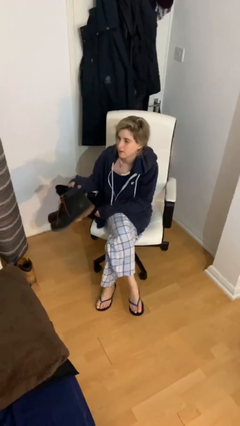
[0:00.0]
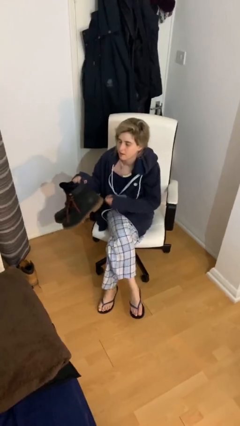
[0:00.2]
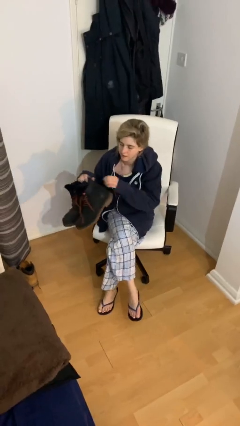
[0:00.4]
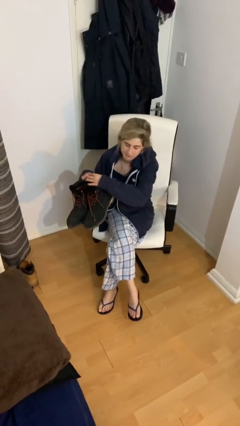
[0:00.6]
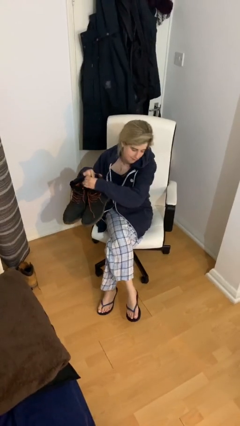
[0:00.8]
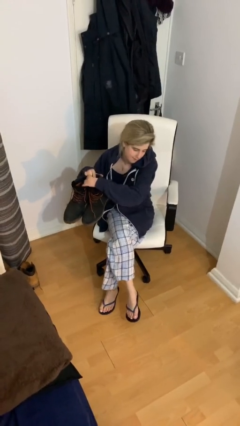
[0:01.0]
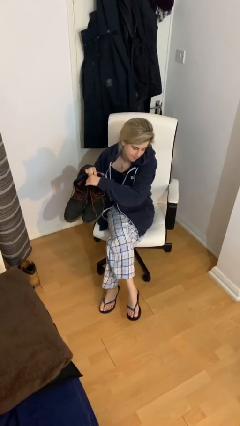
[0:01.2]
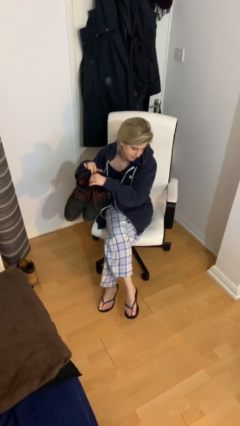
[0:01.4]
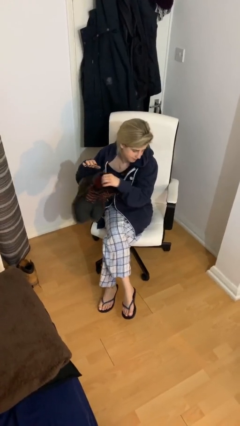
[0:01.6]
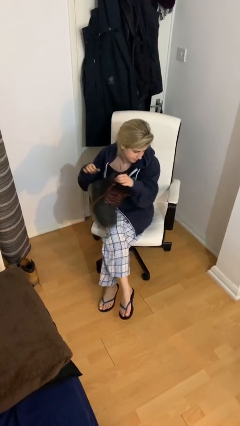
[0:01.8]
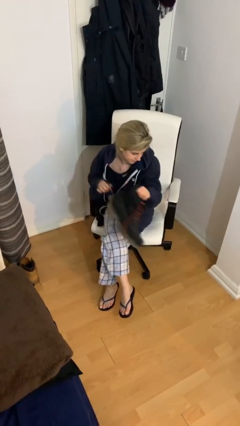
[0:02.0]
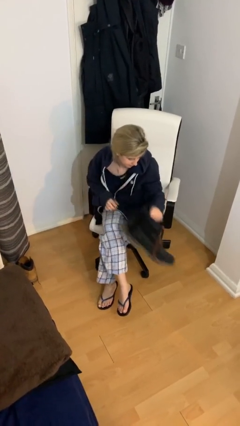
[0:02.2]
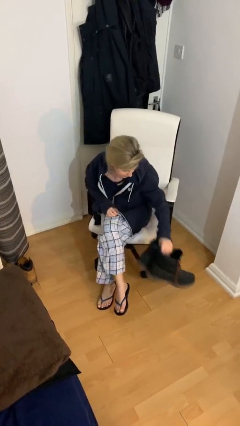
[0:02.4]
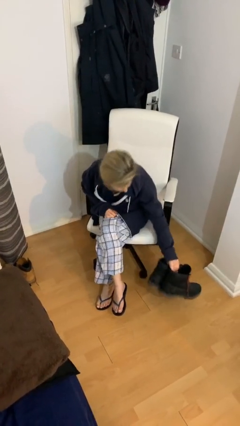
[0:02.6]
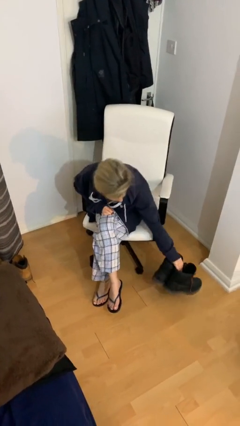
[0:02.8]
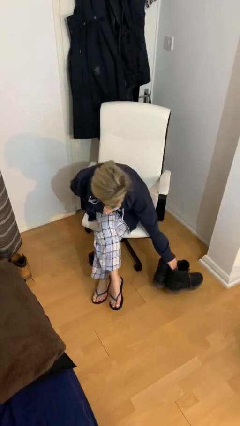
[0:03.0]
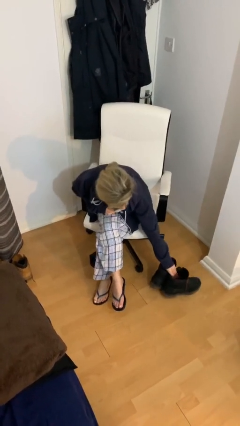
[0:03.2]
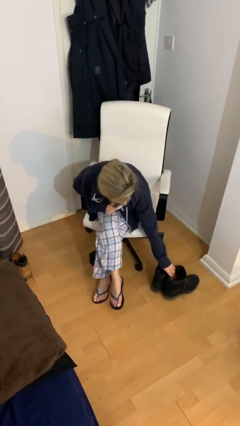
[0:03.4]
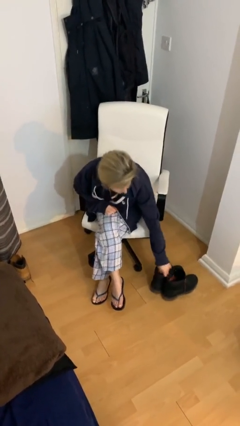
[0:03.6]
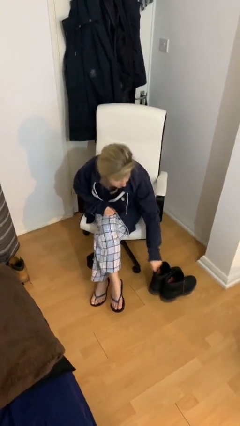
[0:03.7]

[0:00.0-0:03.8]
person puts down object on floor

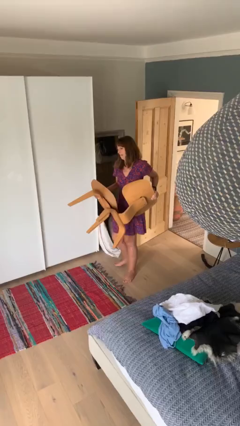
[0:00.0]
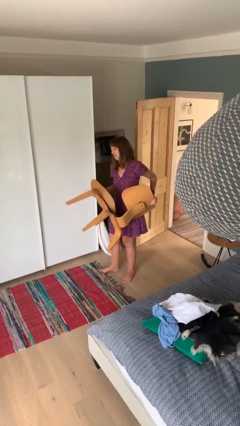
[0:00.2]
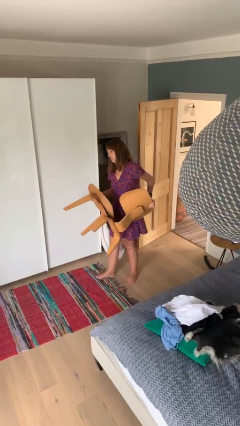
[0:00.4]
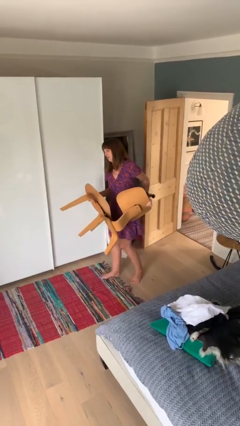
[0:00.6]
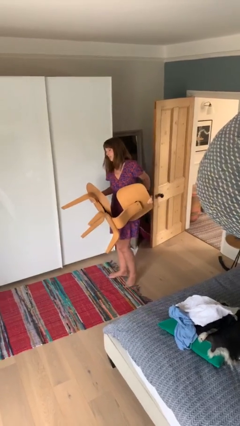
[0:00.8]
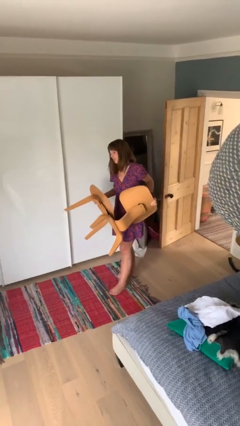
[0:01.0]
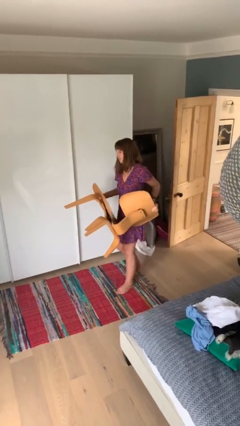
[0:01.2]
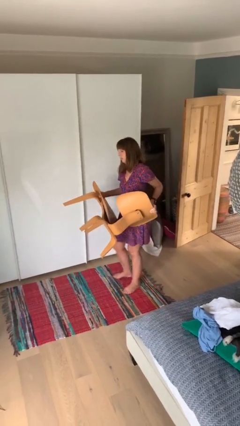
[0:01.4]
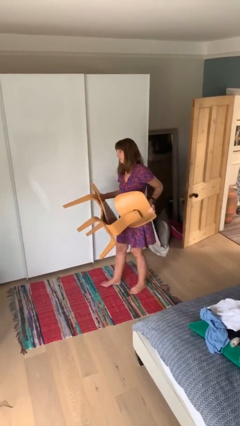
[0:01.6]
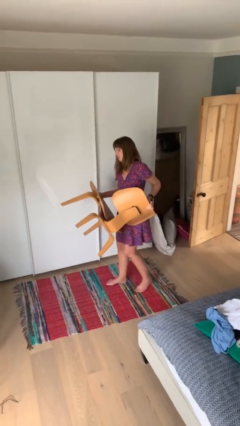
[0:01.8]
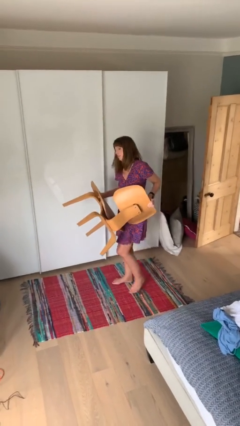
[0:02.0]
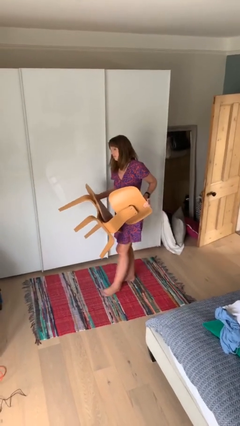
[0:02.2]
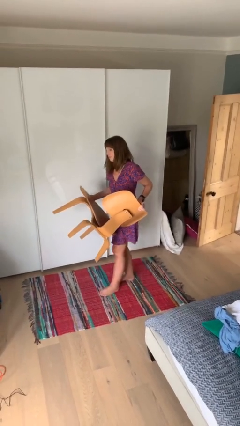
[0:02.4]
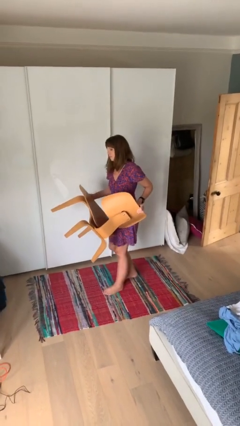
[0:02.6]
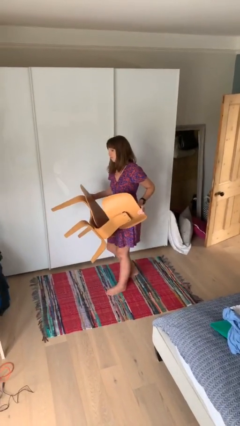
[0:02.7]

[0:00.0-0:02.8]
person carries heavy object

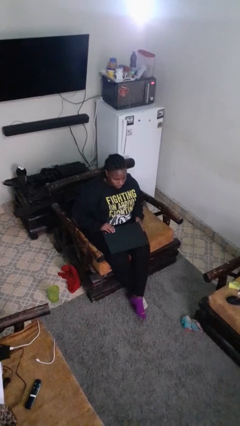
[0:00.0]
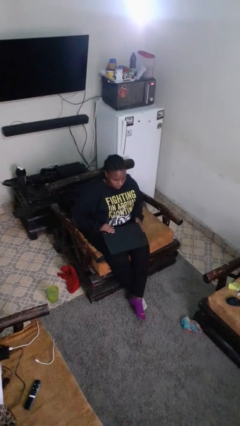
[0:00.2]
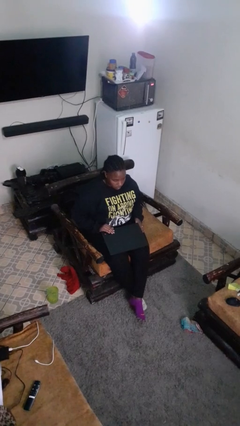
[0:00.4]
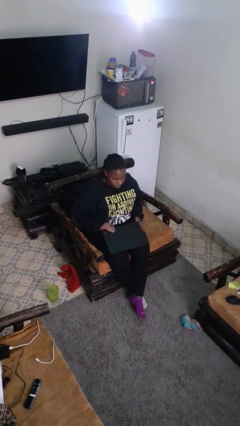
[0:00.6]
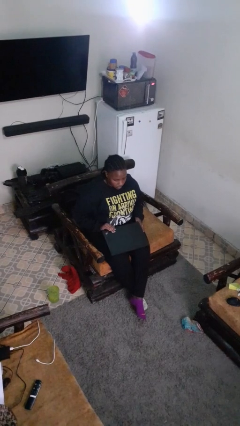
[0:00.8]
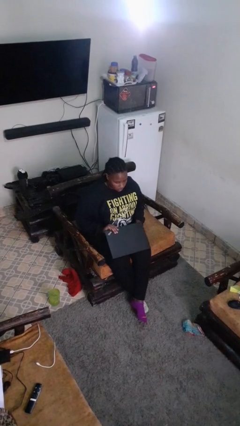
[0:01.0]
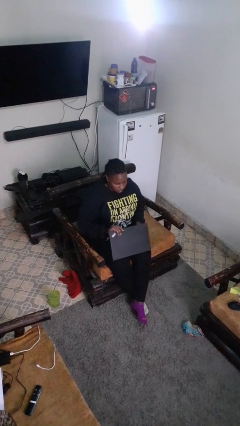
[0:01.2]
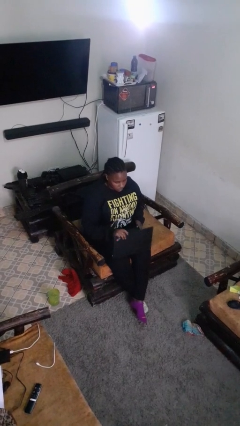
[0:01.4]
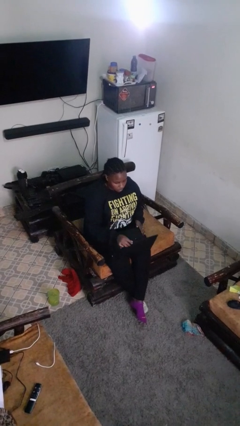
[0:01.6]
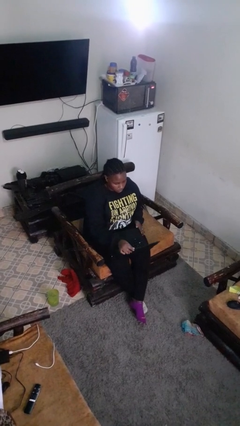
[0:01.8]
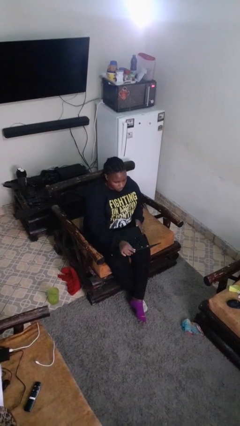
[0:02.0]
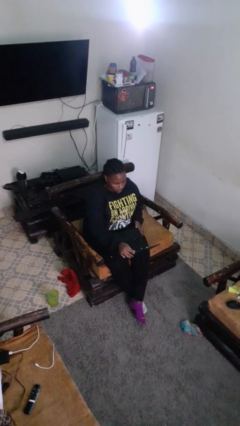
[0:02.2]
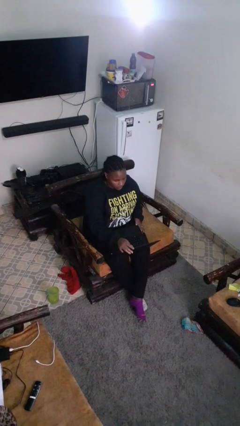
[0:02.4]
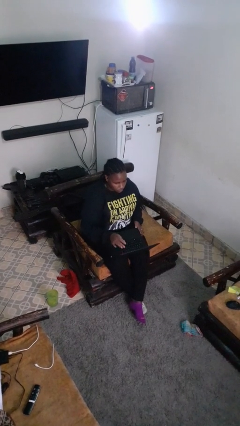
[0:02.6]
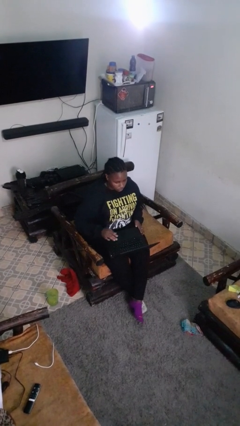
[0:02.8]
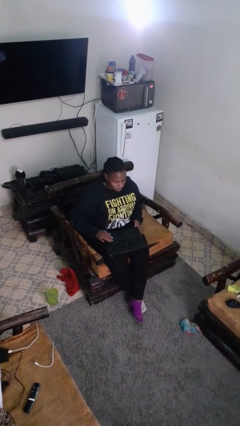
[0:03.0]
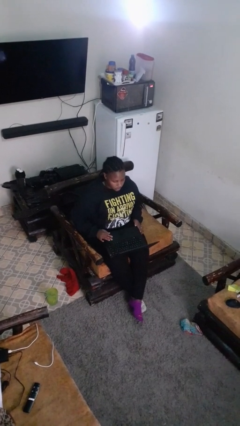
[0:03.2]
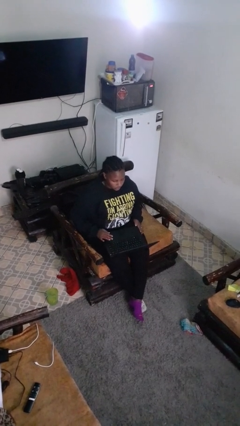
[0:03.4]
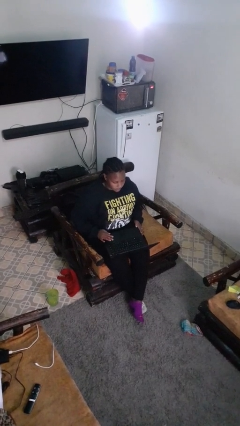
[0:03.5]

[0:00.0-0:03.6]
person opens laptop

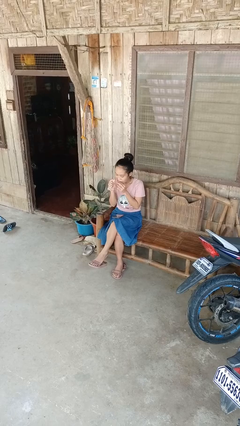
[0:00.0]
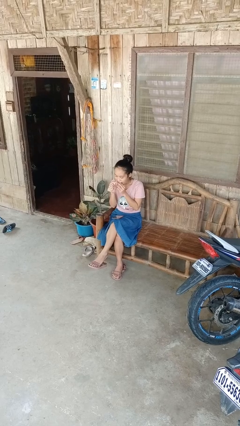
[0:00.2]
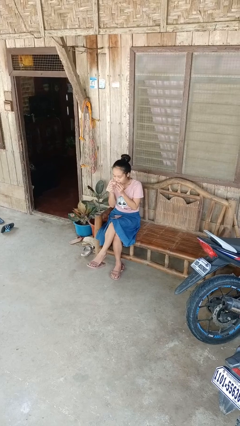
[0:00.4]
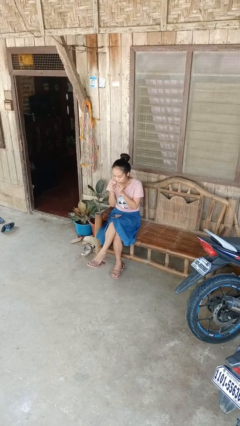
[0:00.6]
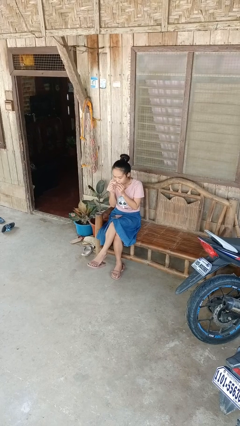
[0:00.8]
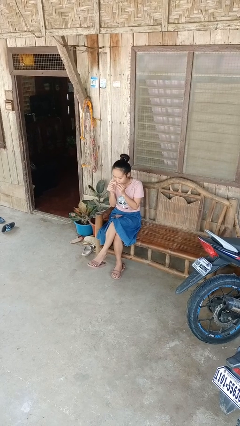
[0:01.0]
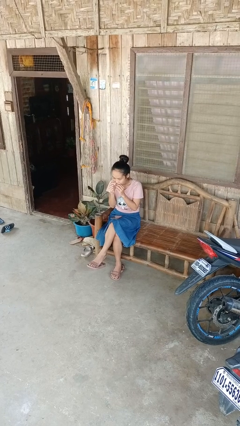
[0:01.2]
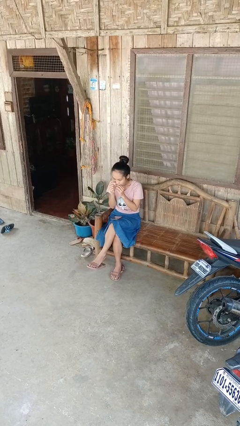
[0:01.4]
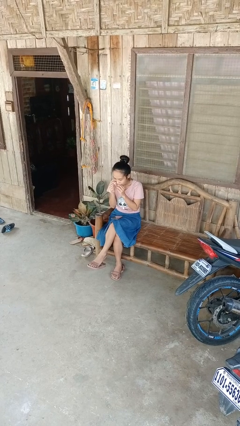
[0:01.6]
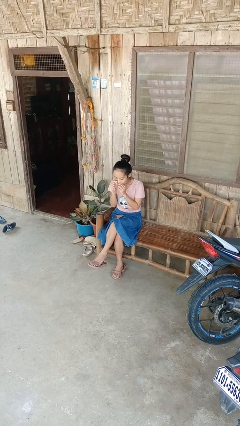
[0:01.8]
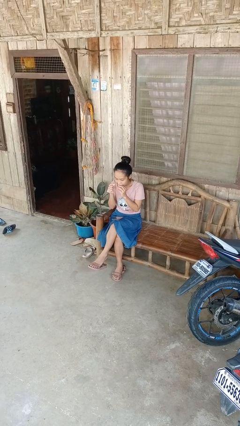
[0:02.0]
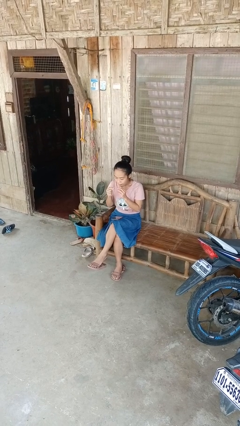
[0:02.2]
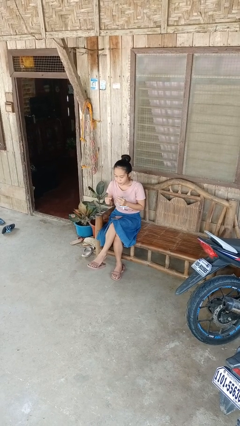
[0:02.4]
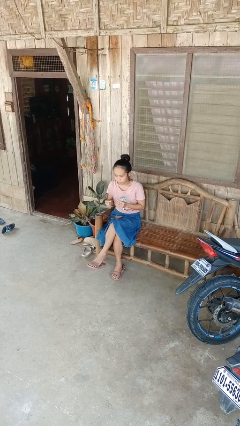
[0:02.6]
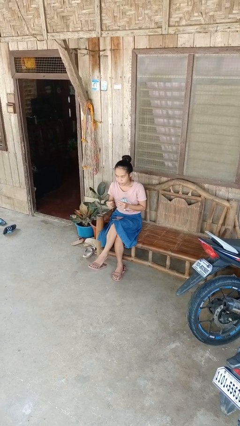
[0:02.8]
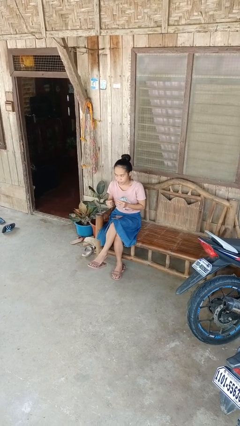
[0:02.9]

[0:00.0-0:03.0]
person flosses

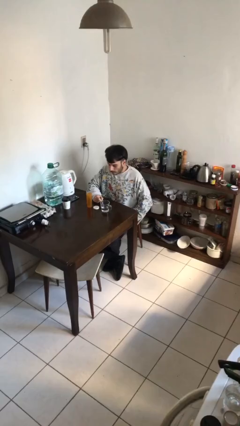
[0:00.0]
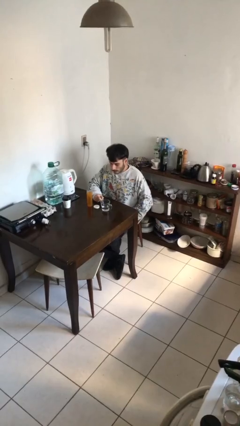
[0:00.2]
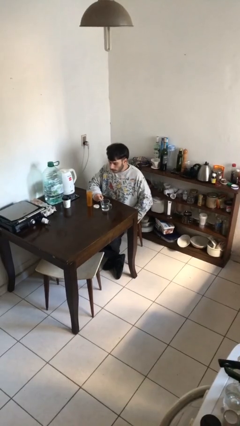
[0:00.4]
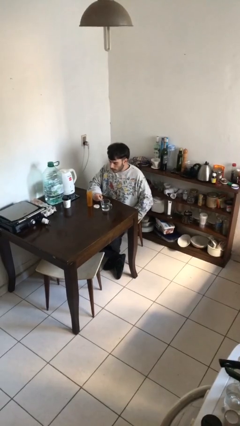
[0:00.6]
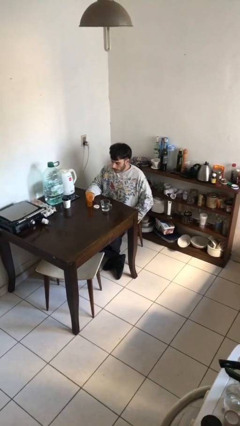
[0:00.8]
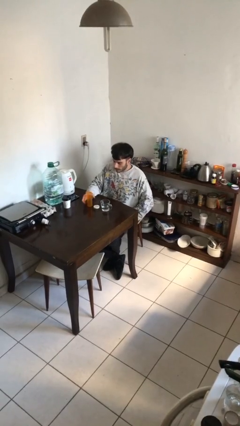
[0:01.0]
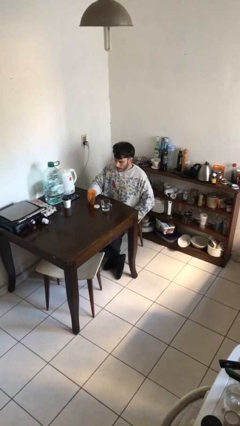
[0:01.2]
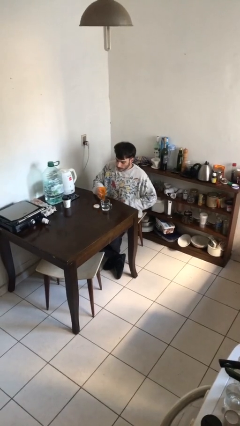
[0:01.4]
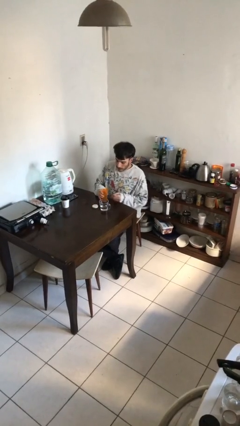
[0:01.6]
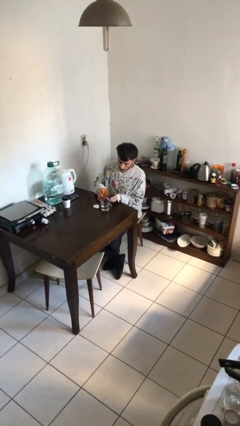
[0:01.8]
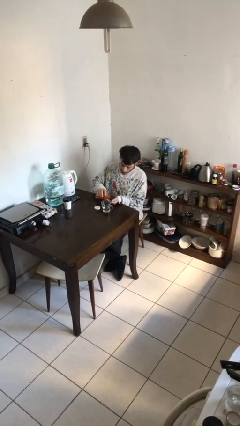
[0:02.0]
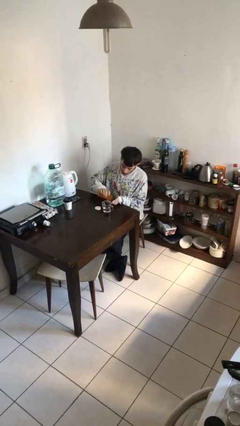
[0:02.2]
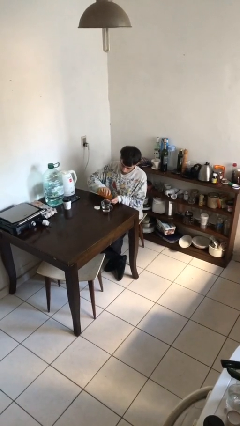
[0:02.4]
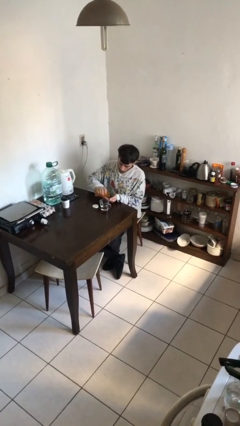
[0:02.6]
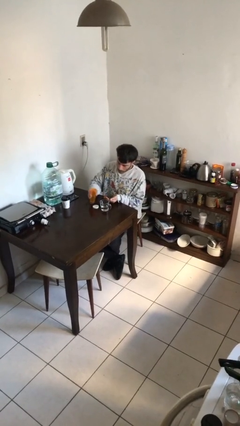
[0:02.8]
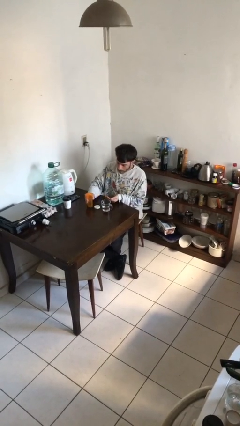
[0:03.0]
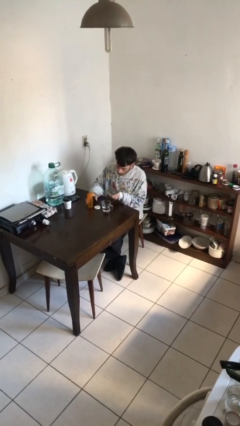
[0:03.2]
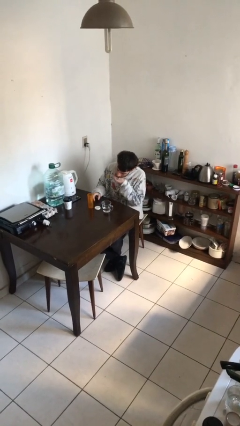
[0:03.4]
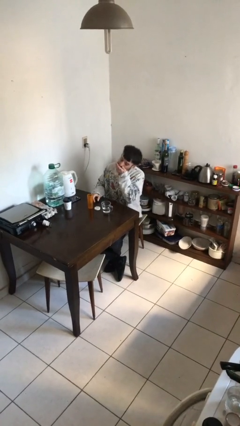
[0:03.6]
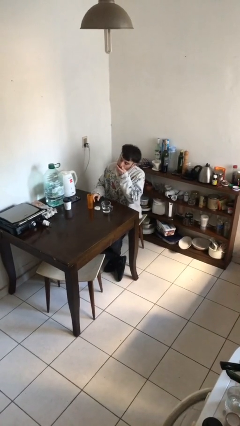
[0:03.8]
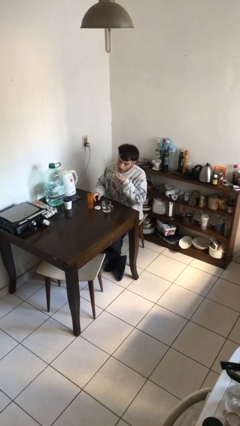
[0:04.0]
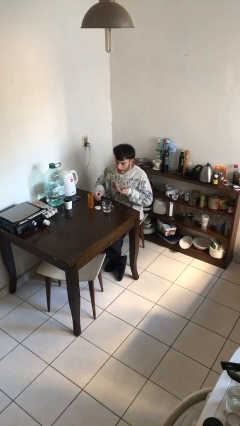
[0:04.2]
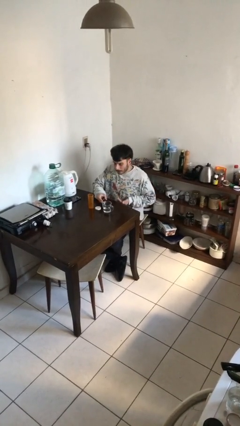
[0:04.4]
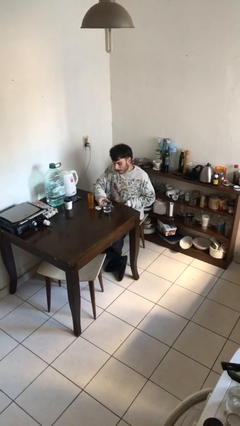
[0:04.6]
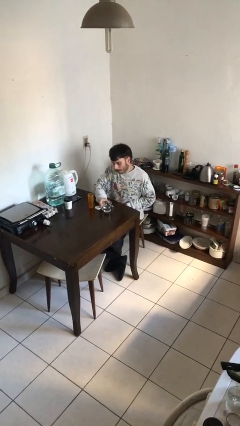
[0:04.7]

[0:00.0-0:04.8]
person takes medicine pills
